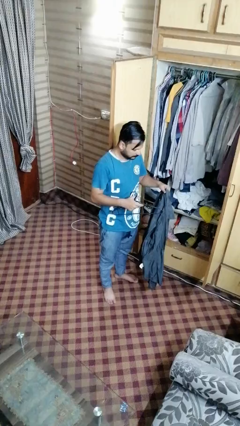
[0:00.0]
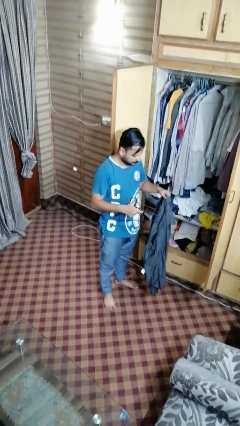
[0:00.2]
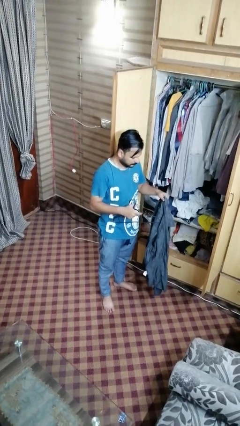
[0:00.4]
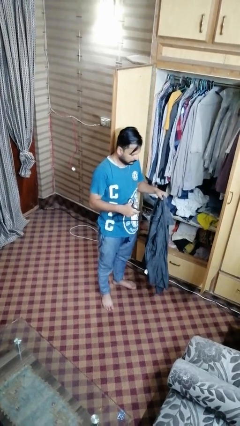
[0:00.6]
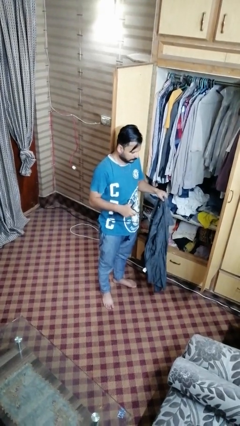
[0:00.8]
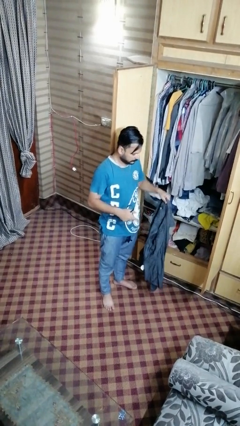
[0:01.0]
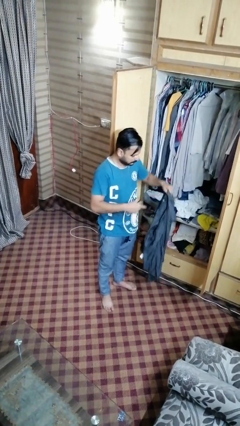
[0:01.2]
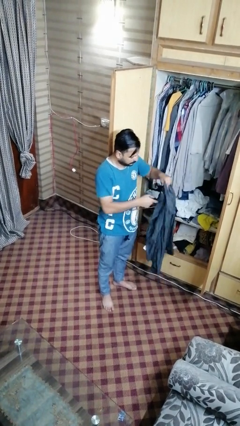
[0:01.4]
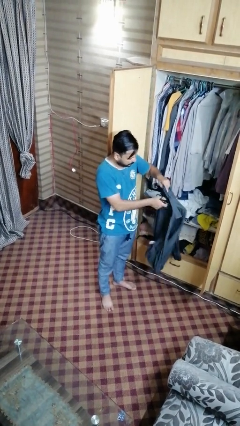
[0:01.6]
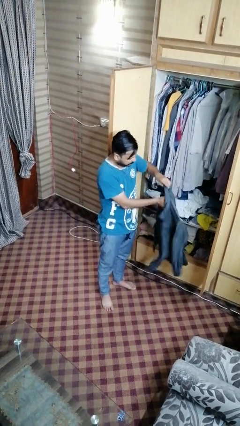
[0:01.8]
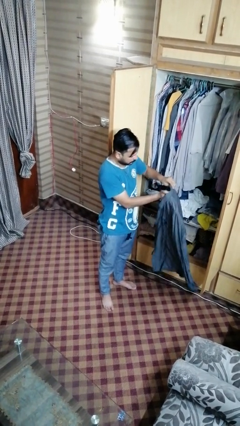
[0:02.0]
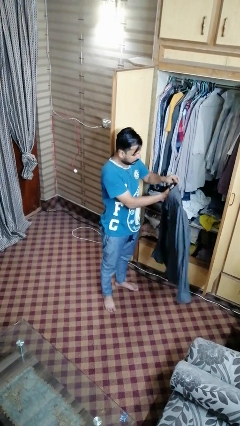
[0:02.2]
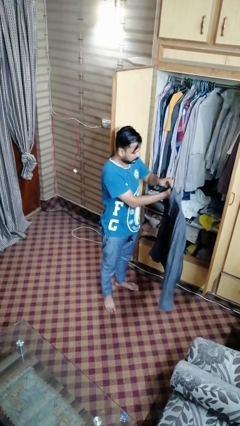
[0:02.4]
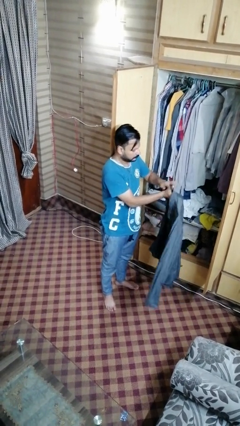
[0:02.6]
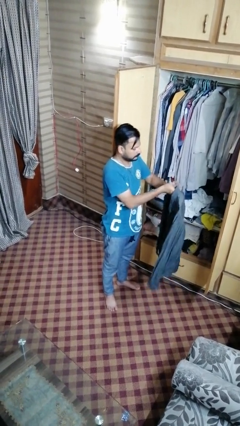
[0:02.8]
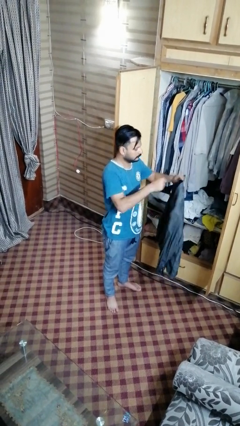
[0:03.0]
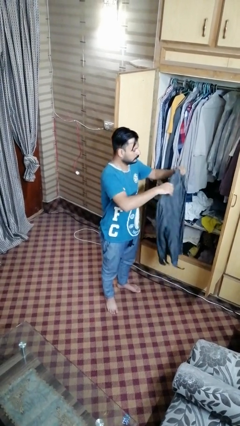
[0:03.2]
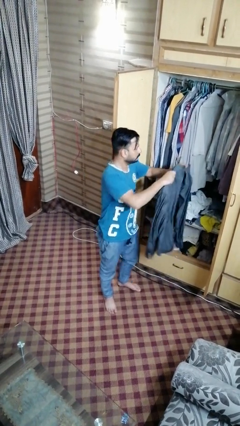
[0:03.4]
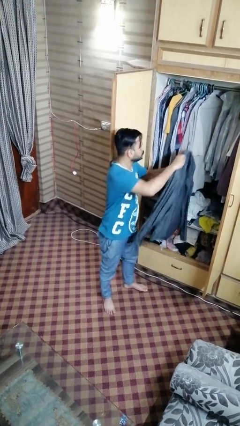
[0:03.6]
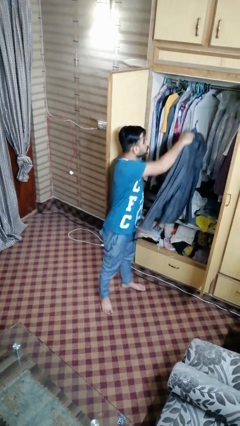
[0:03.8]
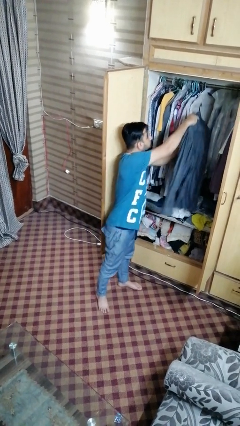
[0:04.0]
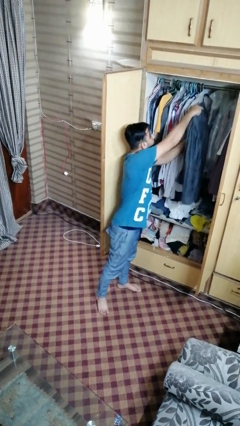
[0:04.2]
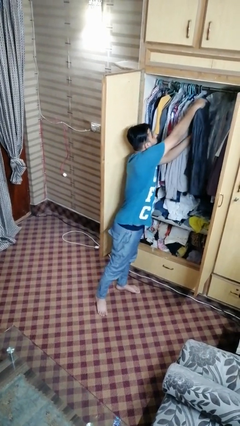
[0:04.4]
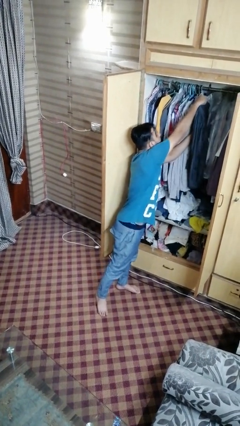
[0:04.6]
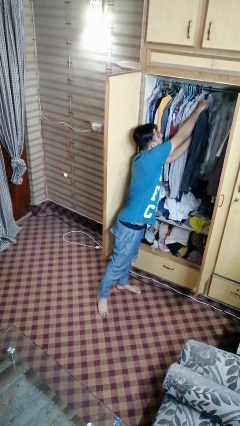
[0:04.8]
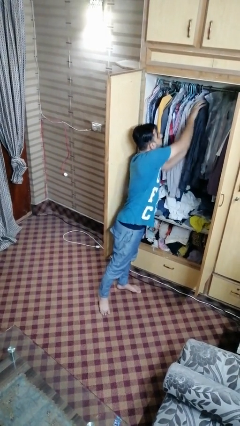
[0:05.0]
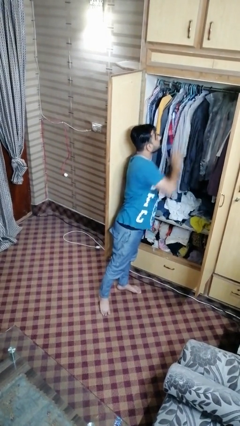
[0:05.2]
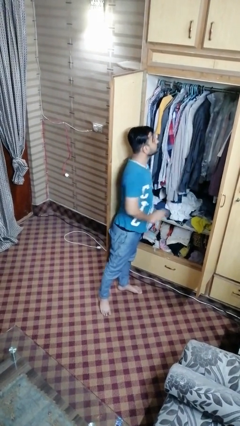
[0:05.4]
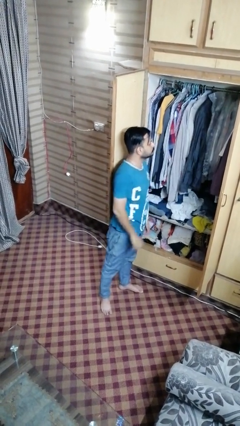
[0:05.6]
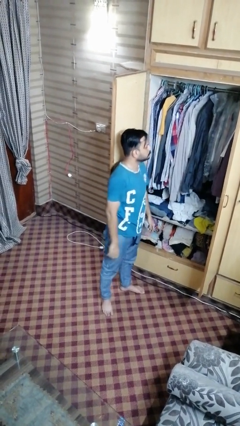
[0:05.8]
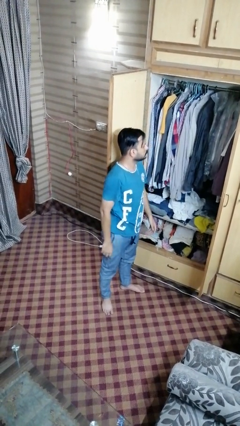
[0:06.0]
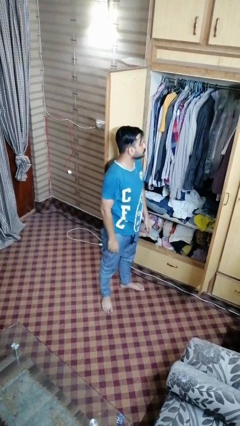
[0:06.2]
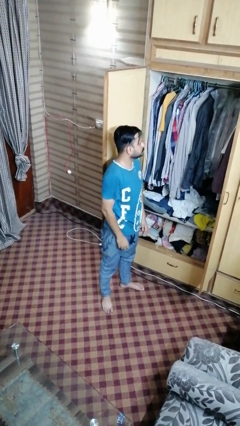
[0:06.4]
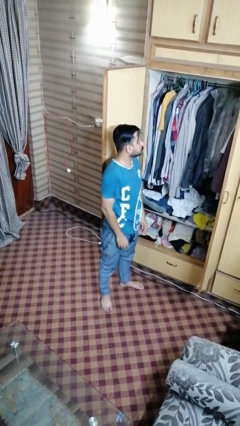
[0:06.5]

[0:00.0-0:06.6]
person puts clothes into dresser

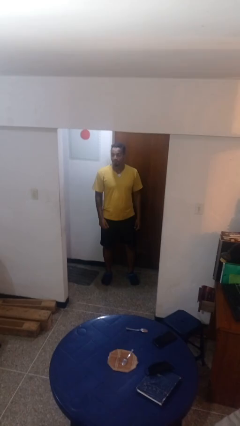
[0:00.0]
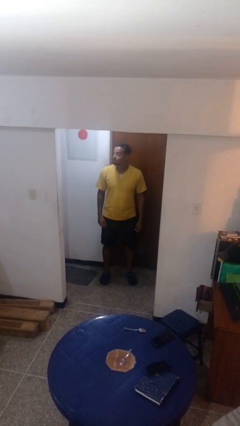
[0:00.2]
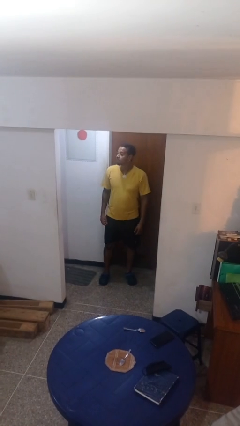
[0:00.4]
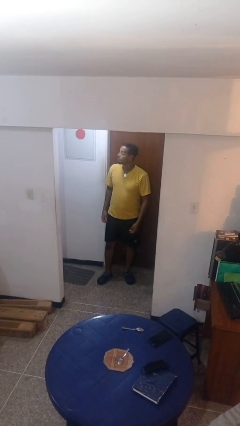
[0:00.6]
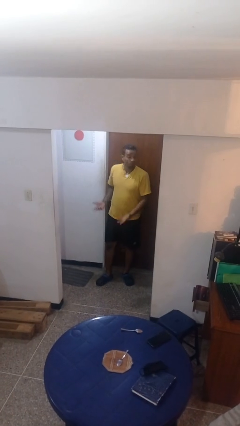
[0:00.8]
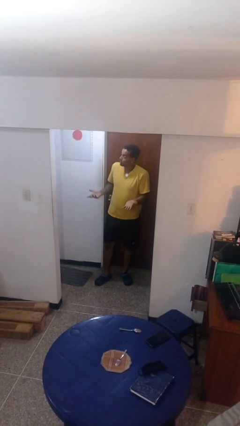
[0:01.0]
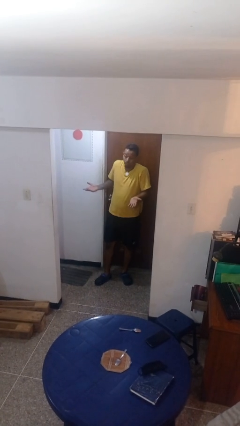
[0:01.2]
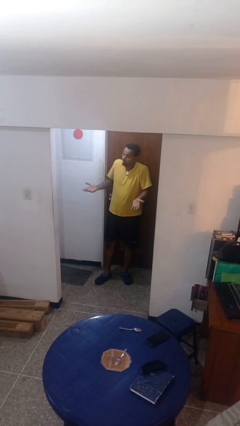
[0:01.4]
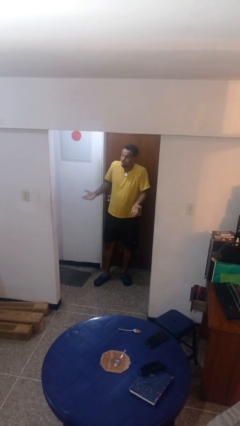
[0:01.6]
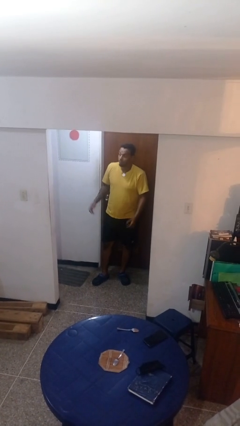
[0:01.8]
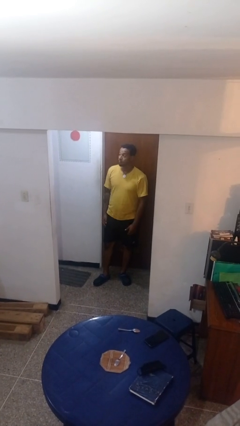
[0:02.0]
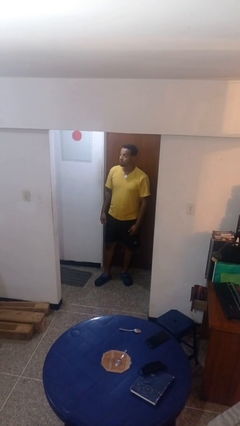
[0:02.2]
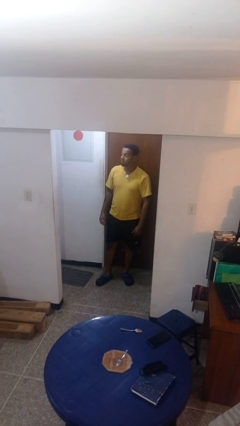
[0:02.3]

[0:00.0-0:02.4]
person shakes head

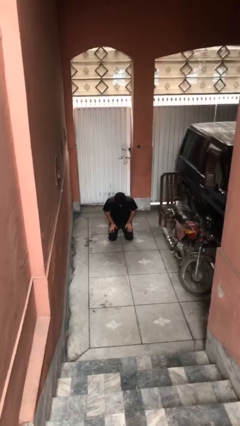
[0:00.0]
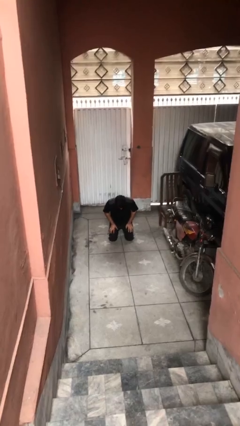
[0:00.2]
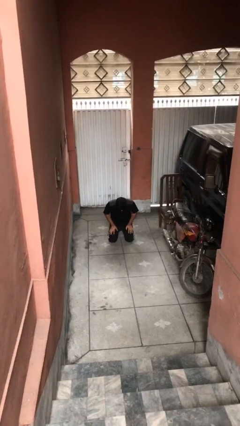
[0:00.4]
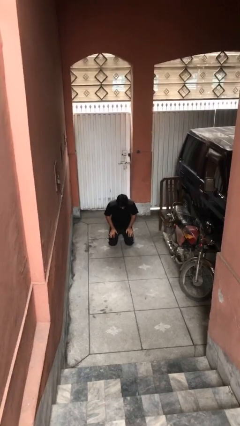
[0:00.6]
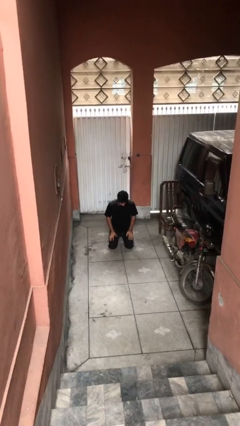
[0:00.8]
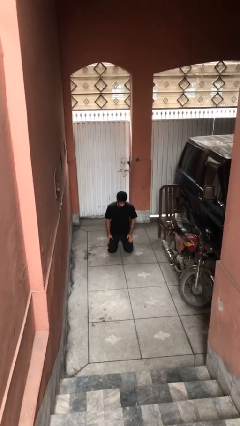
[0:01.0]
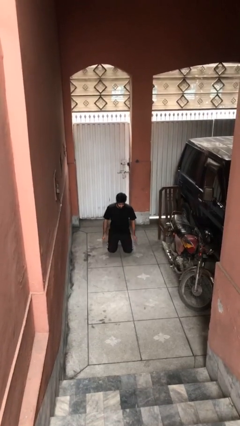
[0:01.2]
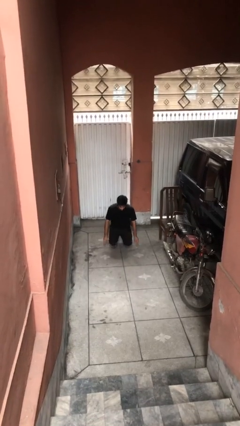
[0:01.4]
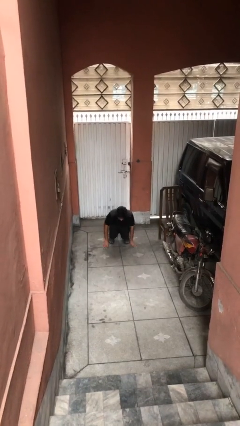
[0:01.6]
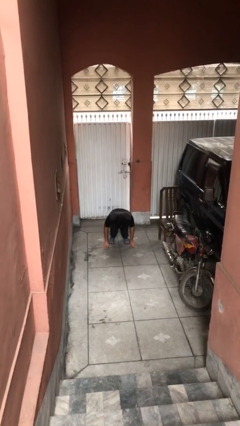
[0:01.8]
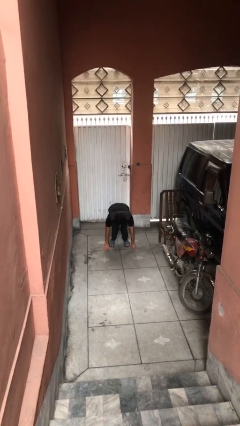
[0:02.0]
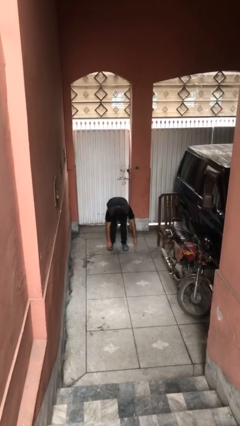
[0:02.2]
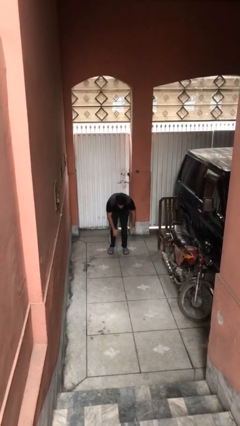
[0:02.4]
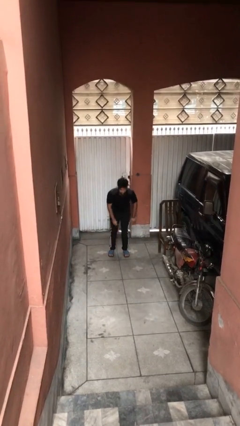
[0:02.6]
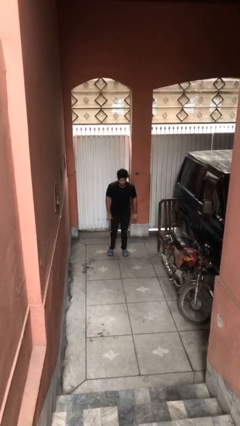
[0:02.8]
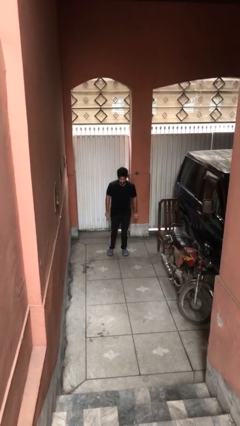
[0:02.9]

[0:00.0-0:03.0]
person stands up

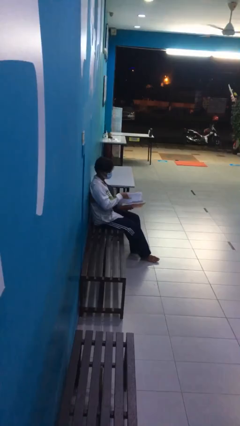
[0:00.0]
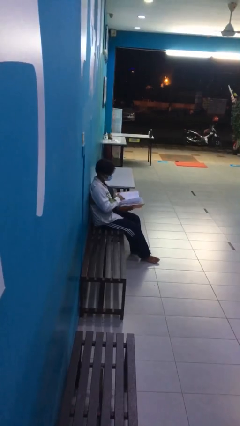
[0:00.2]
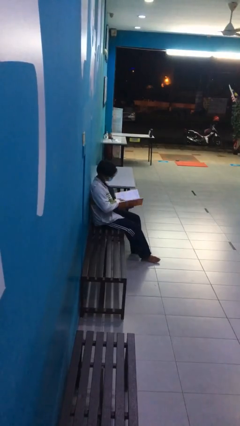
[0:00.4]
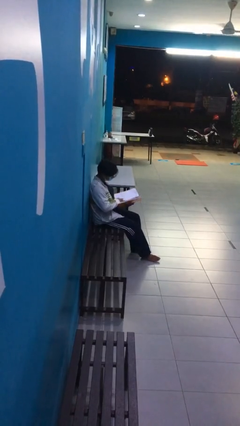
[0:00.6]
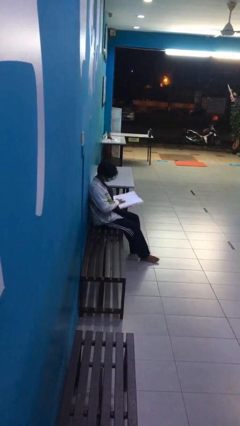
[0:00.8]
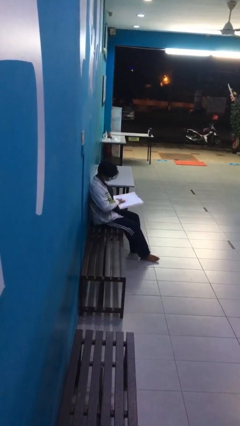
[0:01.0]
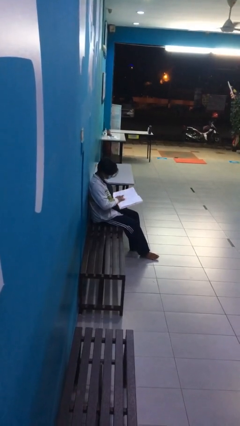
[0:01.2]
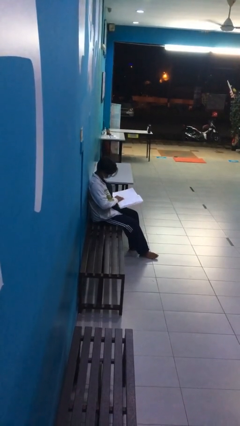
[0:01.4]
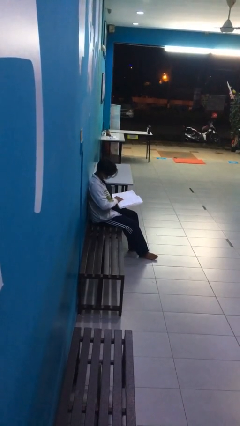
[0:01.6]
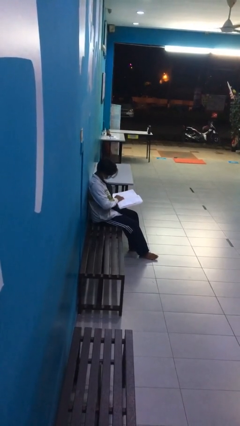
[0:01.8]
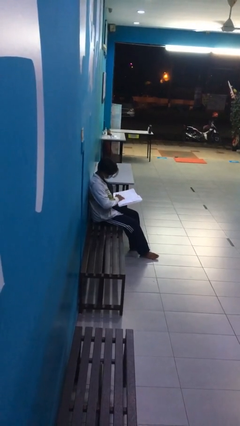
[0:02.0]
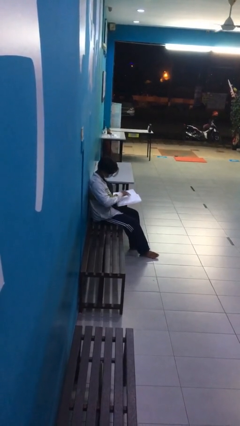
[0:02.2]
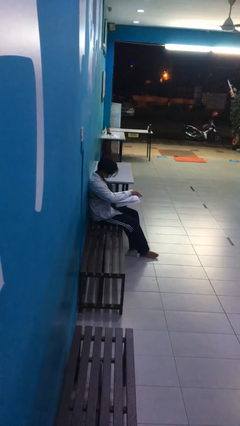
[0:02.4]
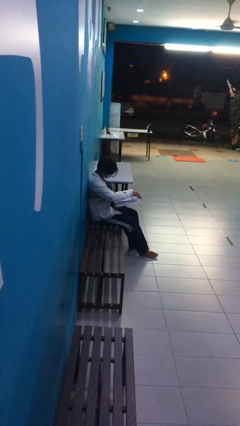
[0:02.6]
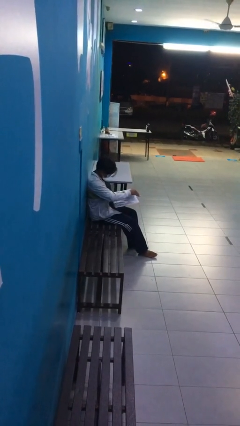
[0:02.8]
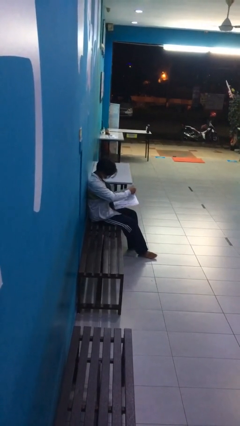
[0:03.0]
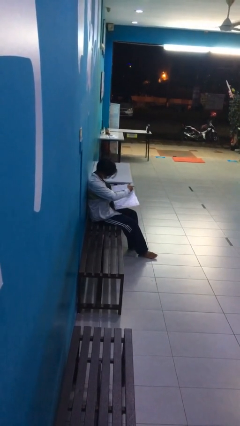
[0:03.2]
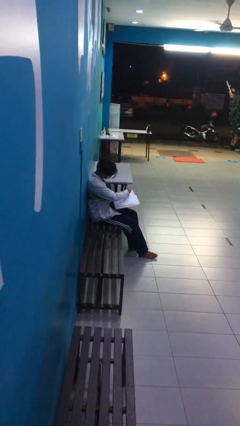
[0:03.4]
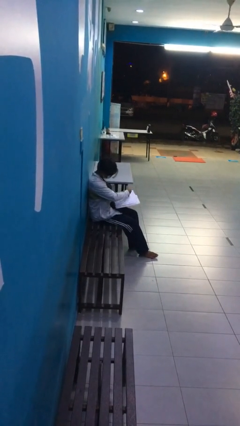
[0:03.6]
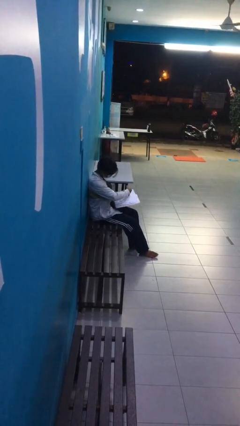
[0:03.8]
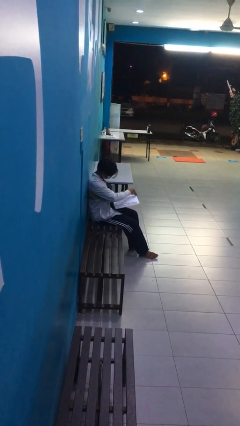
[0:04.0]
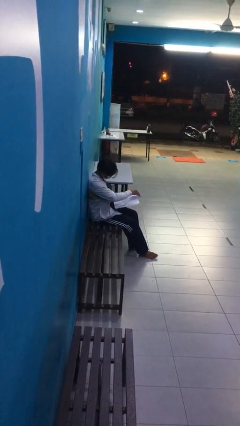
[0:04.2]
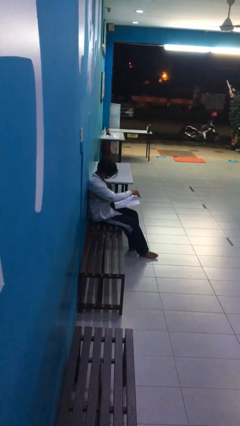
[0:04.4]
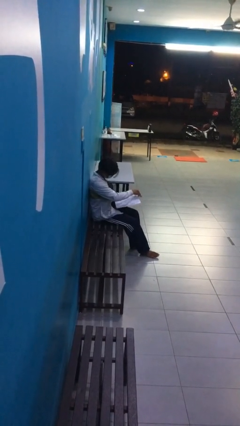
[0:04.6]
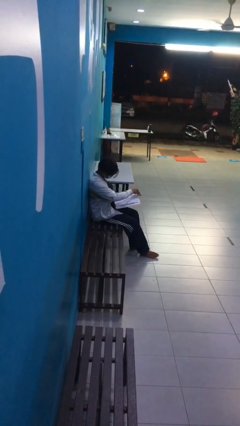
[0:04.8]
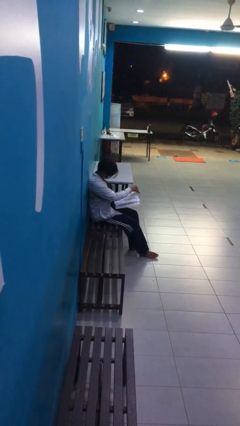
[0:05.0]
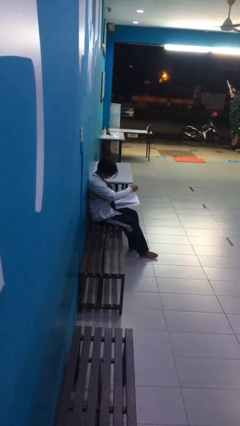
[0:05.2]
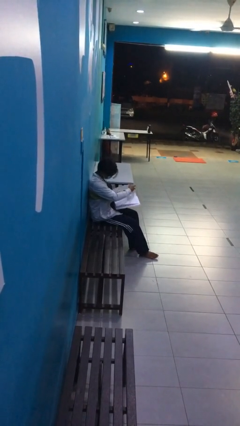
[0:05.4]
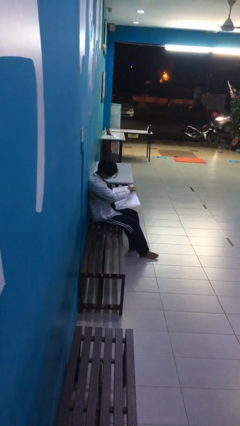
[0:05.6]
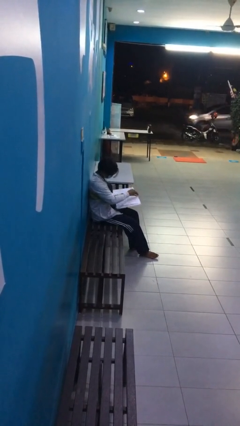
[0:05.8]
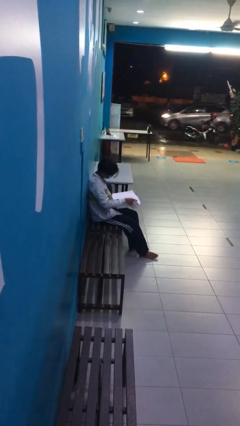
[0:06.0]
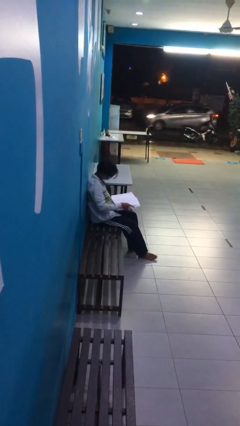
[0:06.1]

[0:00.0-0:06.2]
person reads document
